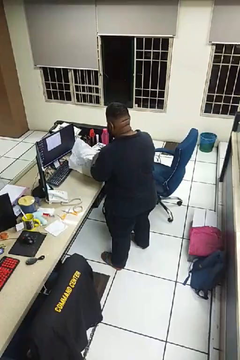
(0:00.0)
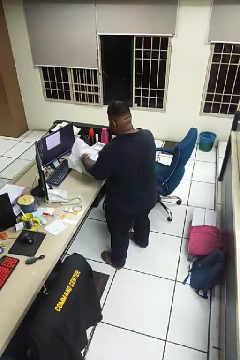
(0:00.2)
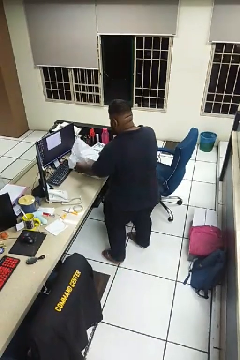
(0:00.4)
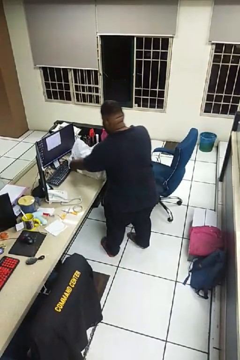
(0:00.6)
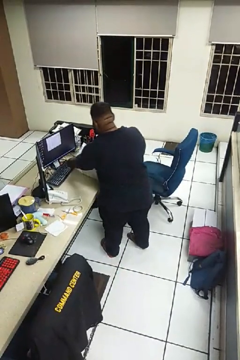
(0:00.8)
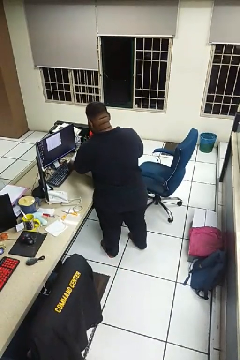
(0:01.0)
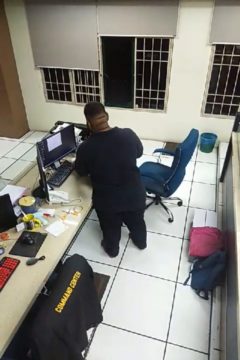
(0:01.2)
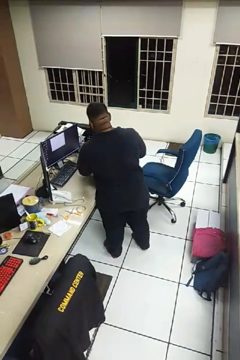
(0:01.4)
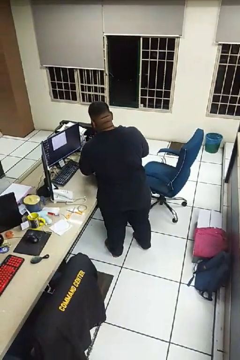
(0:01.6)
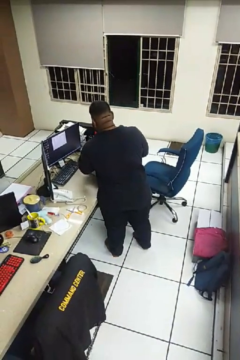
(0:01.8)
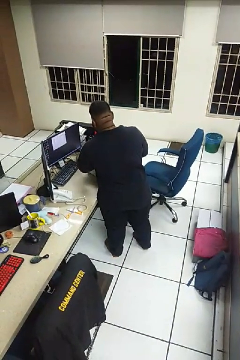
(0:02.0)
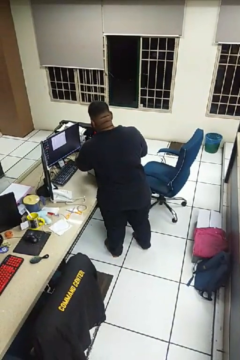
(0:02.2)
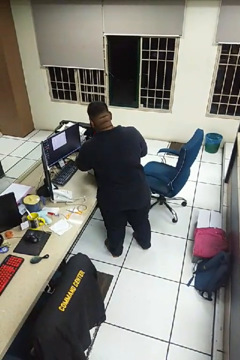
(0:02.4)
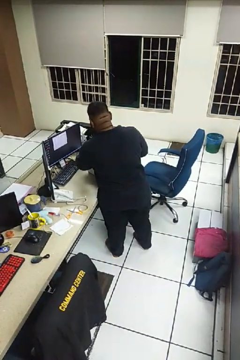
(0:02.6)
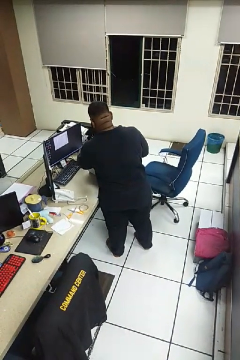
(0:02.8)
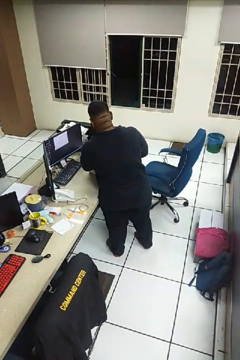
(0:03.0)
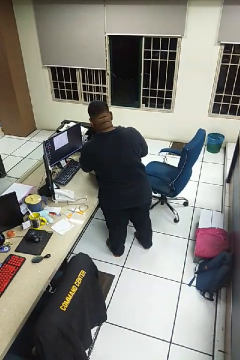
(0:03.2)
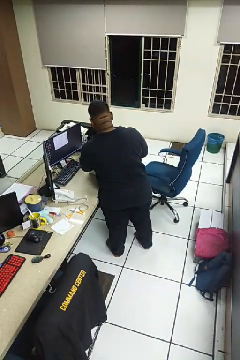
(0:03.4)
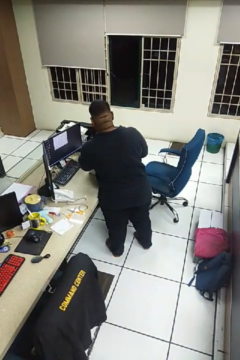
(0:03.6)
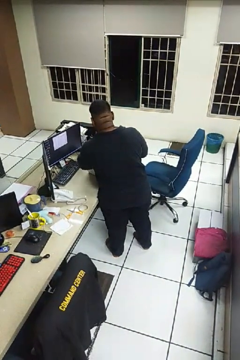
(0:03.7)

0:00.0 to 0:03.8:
person wraps box

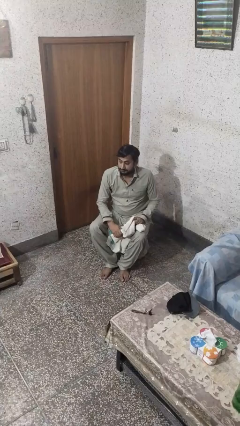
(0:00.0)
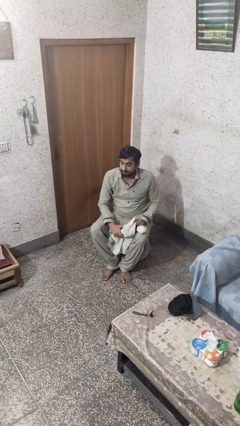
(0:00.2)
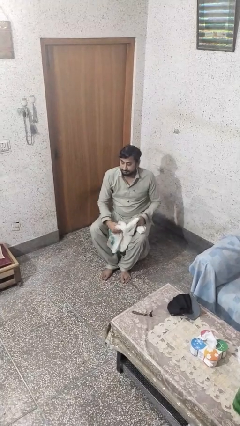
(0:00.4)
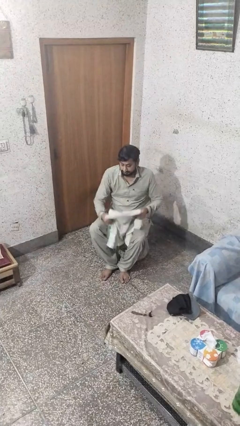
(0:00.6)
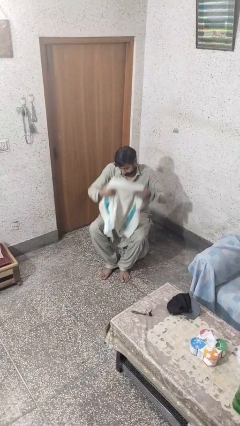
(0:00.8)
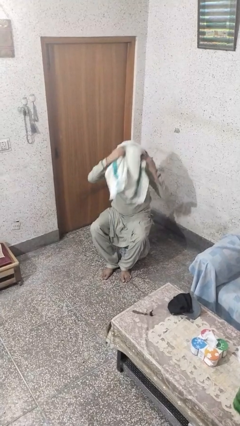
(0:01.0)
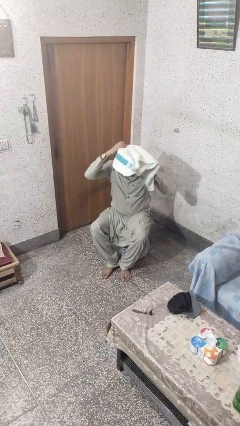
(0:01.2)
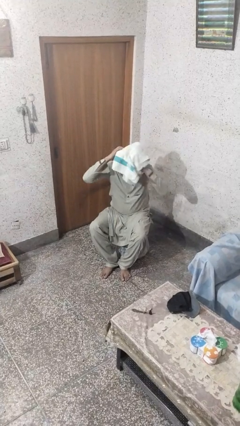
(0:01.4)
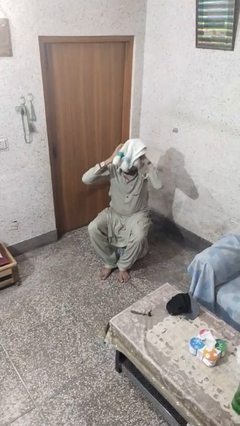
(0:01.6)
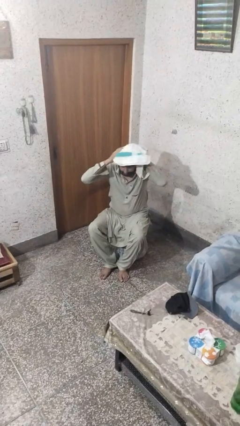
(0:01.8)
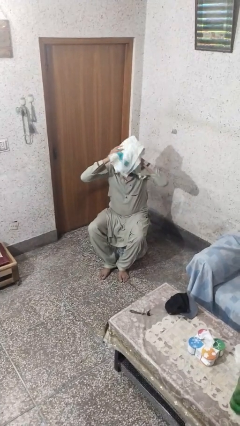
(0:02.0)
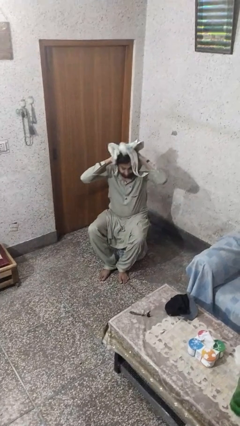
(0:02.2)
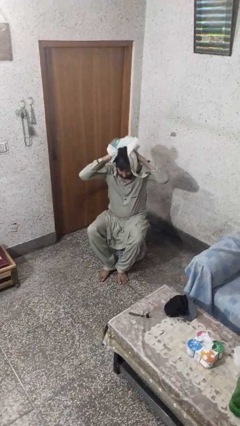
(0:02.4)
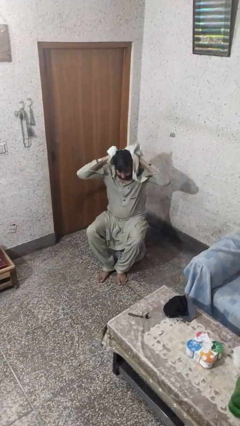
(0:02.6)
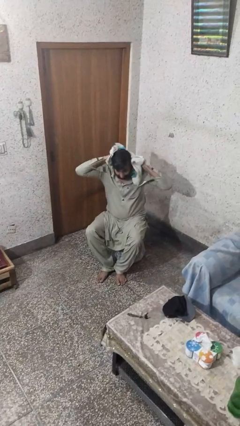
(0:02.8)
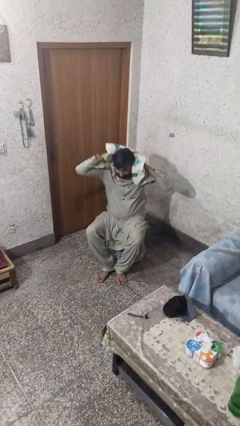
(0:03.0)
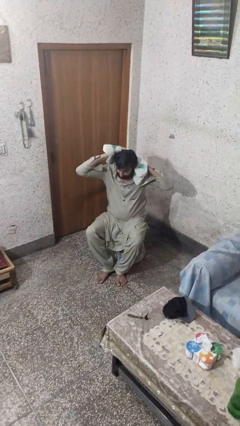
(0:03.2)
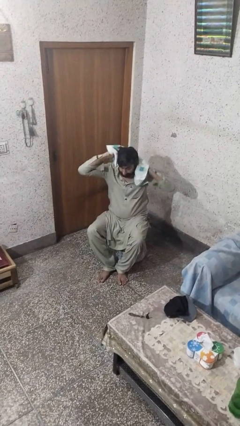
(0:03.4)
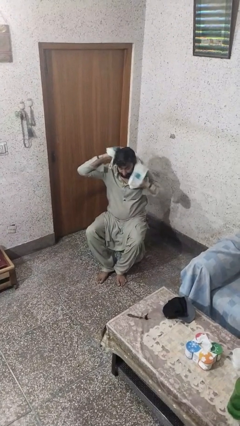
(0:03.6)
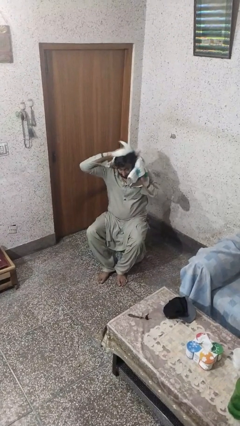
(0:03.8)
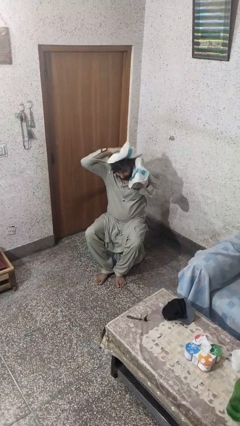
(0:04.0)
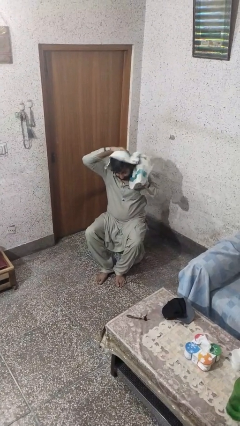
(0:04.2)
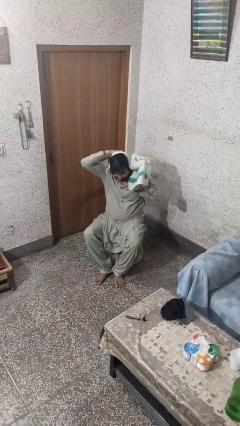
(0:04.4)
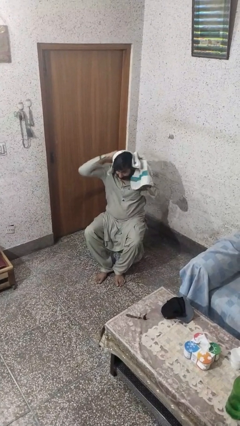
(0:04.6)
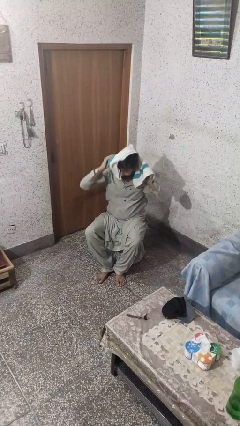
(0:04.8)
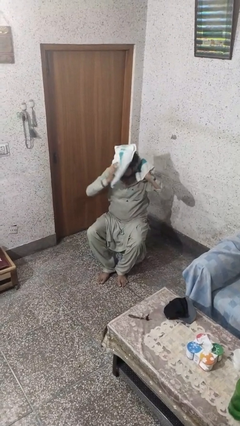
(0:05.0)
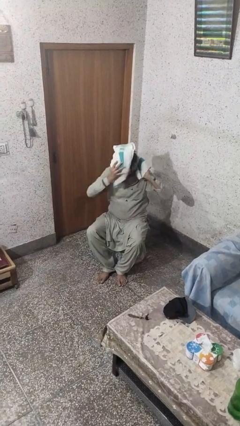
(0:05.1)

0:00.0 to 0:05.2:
person dries hair with towel

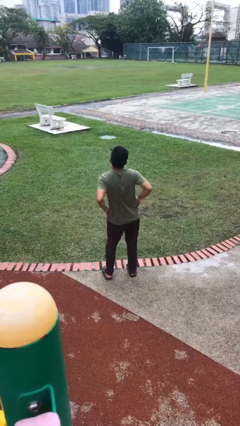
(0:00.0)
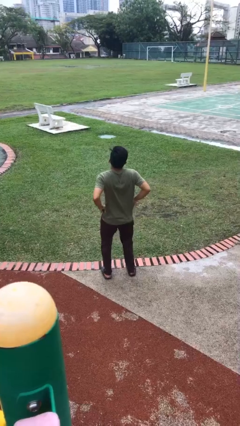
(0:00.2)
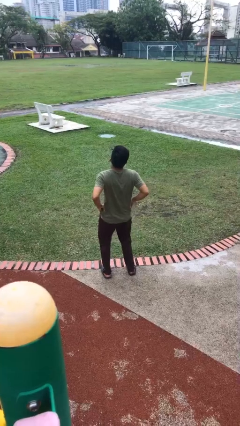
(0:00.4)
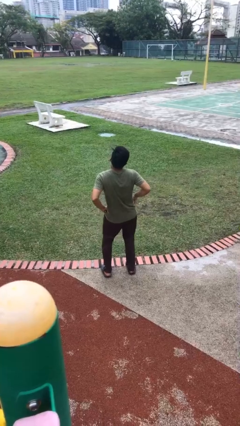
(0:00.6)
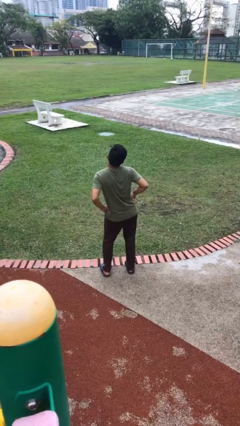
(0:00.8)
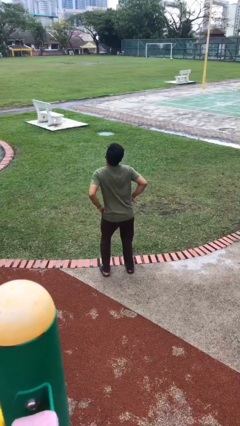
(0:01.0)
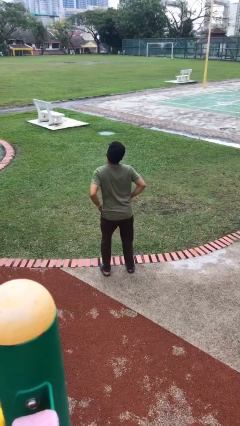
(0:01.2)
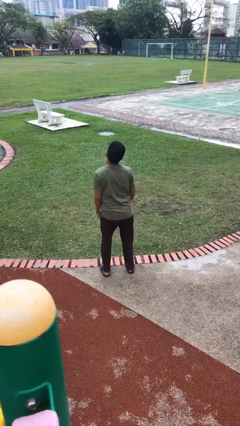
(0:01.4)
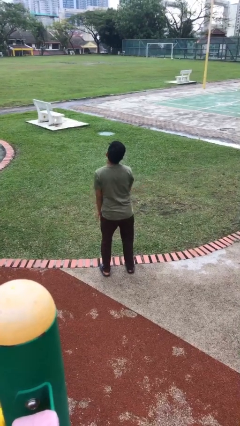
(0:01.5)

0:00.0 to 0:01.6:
person wiggles hips

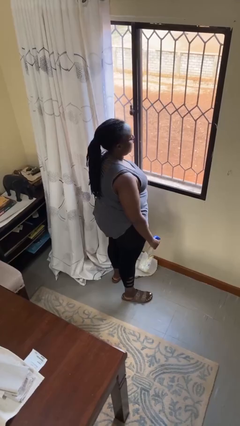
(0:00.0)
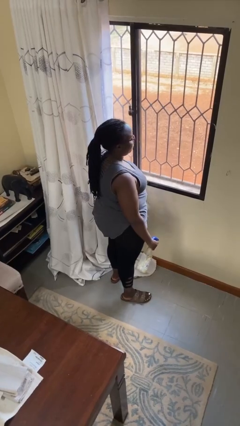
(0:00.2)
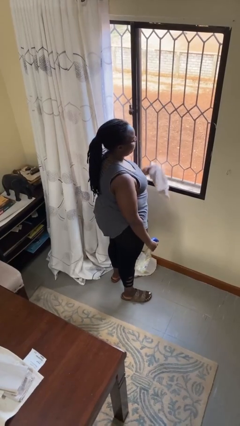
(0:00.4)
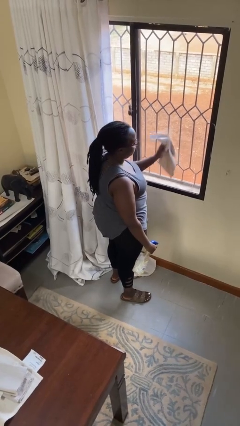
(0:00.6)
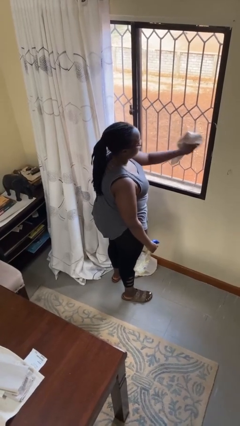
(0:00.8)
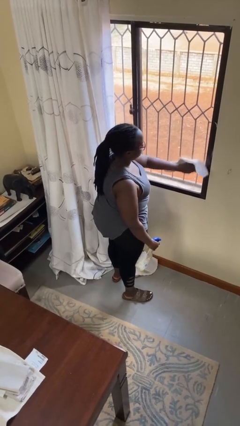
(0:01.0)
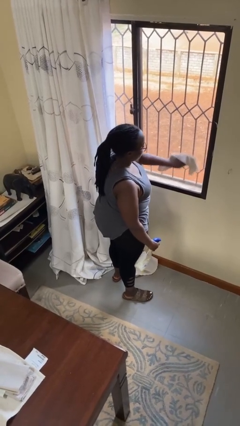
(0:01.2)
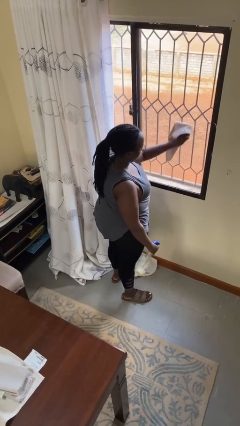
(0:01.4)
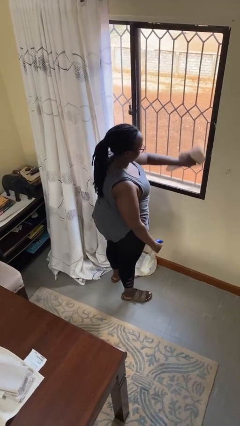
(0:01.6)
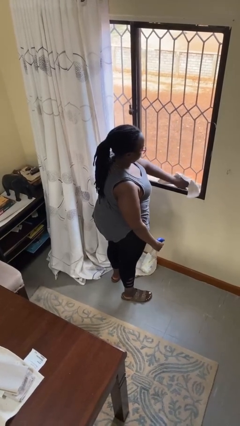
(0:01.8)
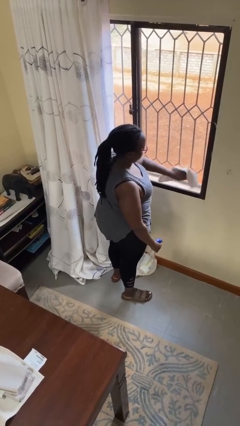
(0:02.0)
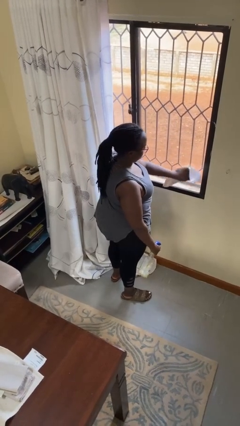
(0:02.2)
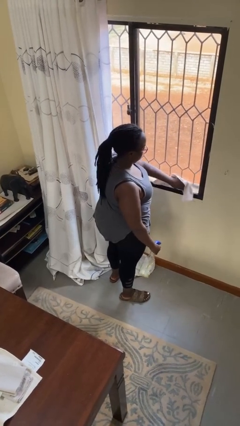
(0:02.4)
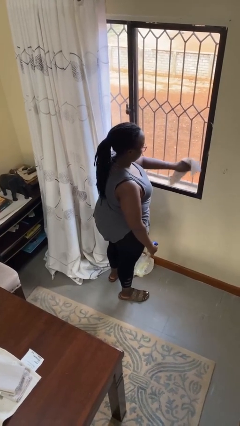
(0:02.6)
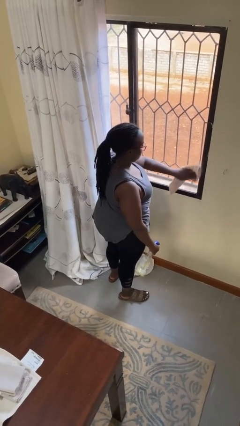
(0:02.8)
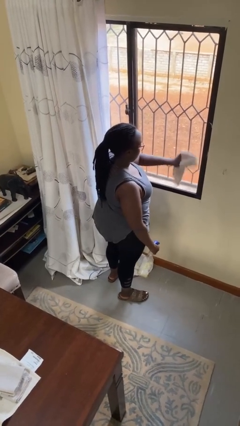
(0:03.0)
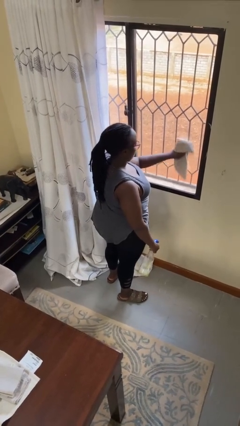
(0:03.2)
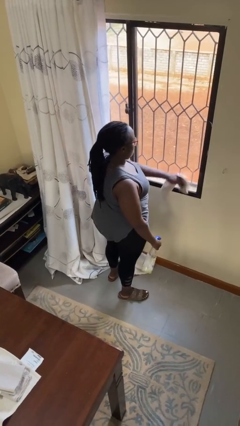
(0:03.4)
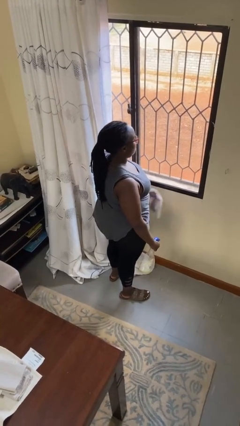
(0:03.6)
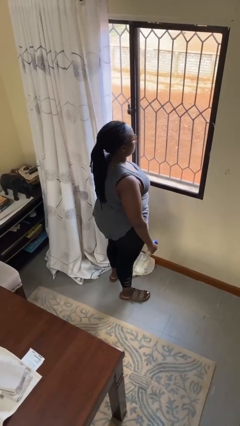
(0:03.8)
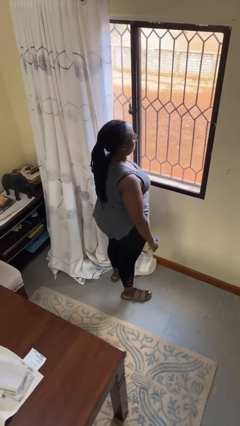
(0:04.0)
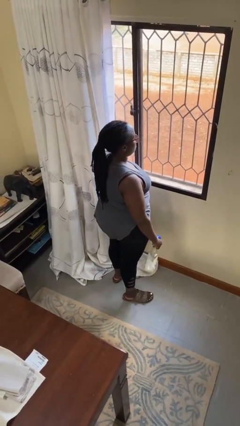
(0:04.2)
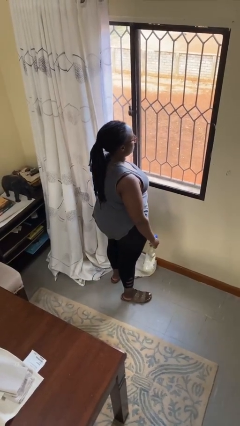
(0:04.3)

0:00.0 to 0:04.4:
person washes window

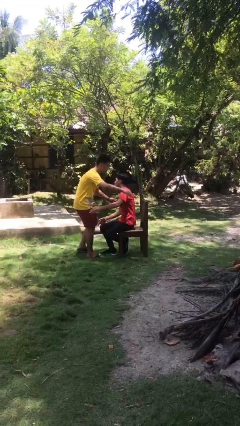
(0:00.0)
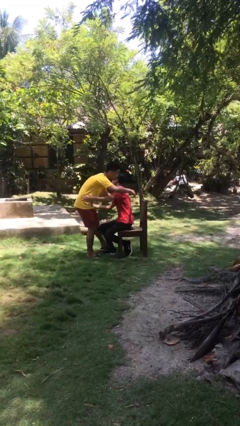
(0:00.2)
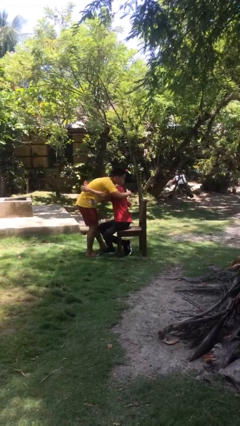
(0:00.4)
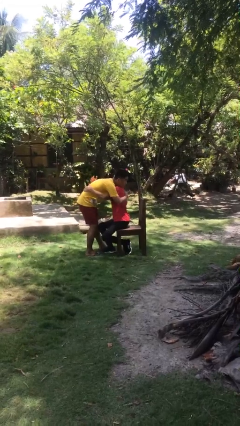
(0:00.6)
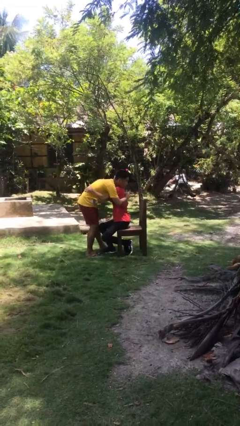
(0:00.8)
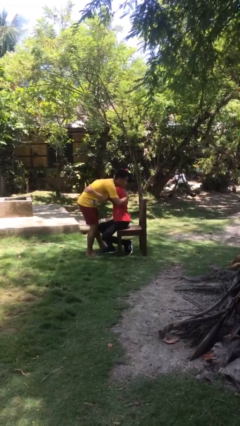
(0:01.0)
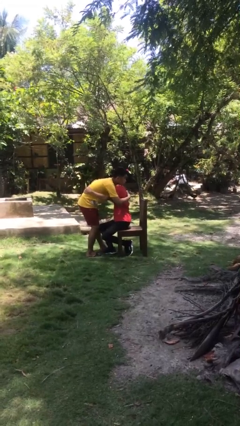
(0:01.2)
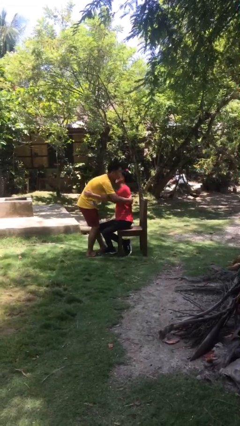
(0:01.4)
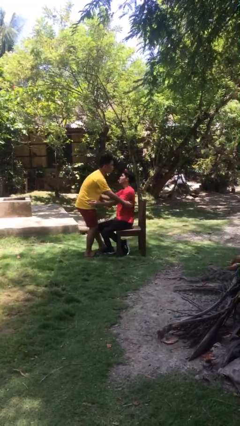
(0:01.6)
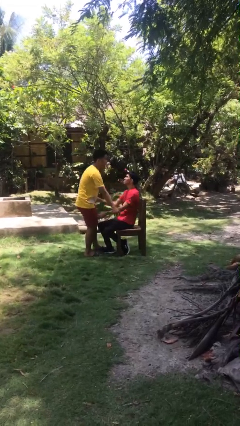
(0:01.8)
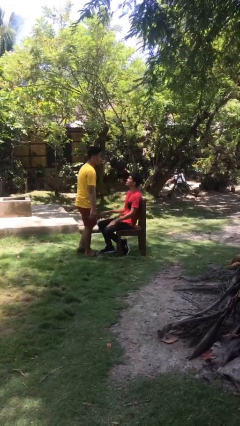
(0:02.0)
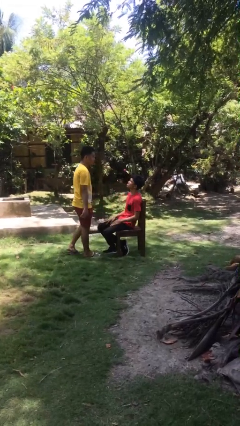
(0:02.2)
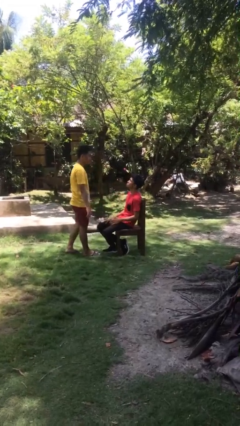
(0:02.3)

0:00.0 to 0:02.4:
person embraces person

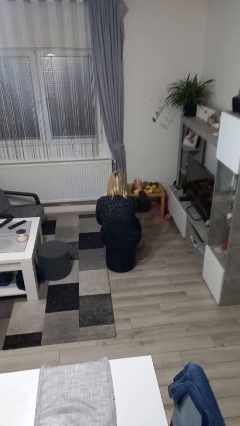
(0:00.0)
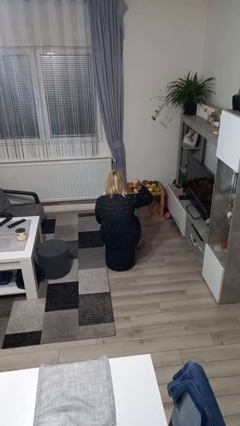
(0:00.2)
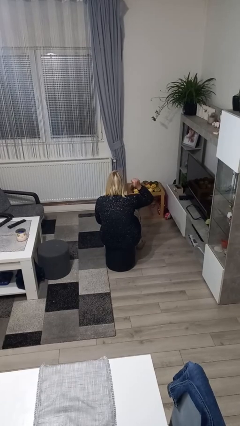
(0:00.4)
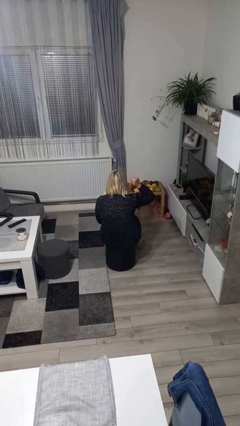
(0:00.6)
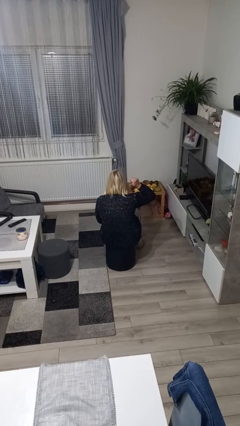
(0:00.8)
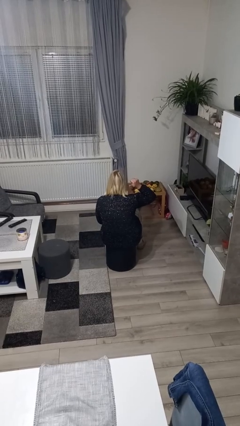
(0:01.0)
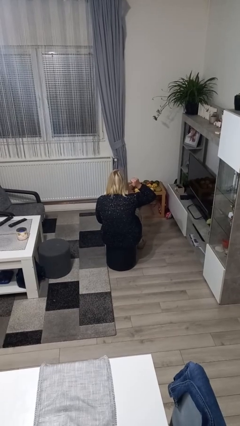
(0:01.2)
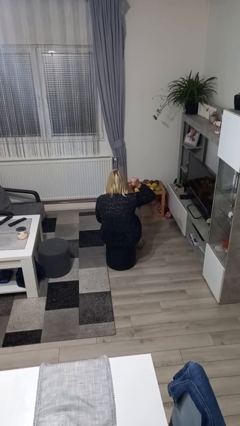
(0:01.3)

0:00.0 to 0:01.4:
person gestures behind me
